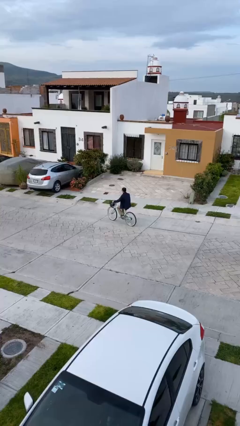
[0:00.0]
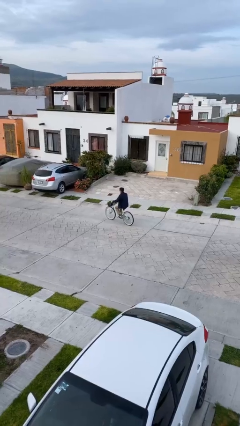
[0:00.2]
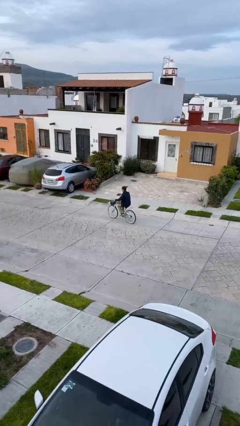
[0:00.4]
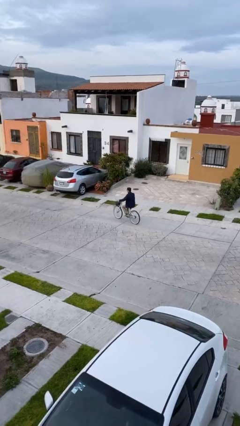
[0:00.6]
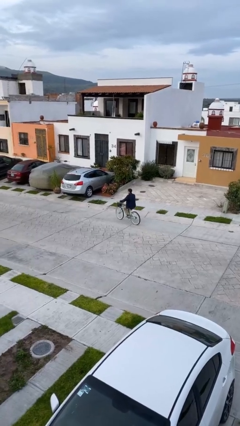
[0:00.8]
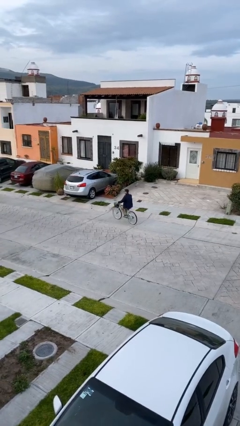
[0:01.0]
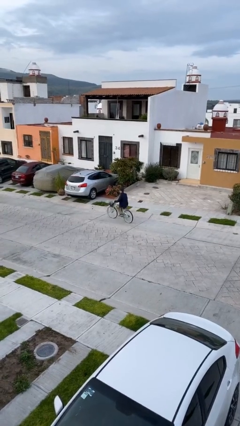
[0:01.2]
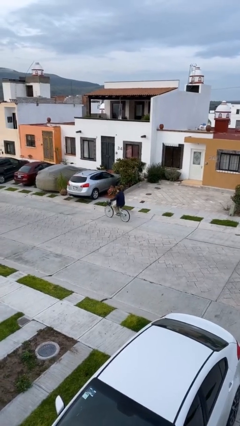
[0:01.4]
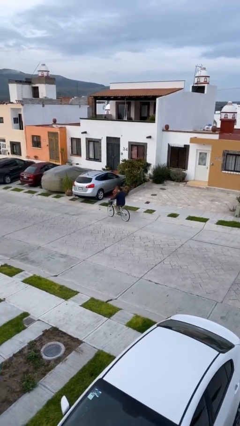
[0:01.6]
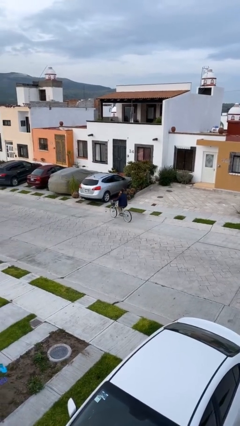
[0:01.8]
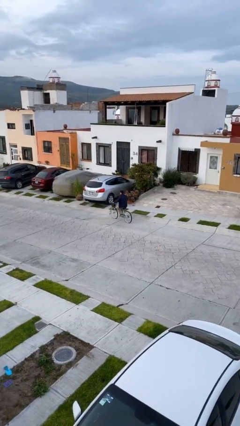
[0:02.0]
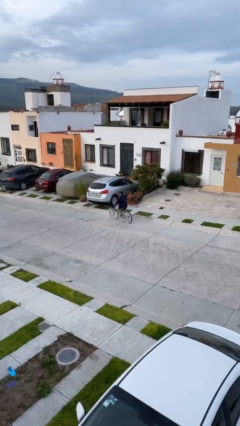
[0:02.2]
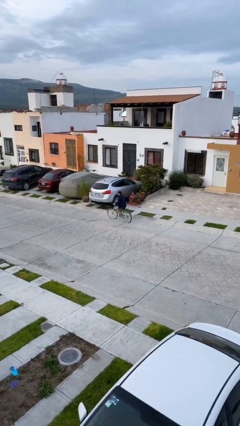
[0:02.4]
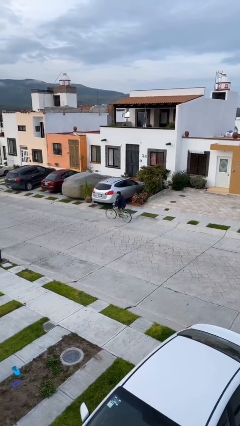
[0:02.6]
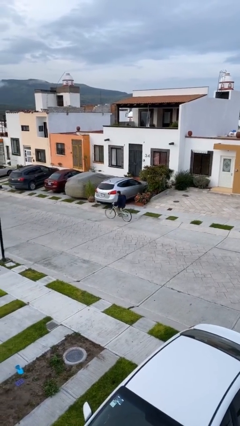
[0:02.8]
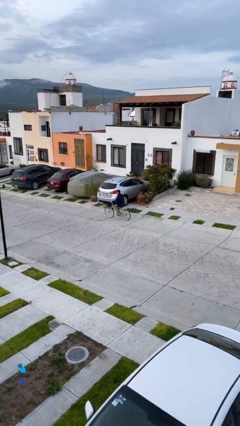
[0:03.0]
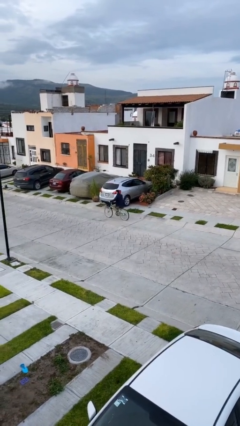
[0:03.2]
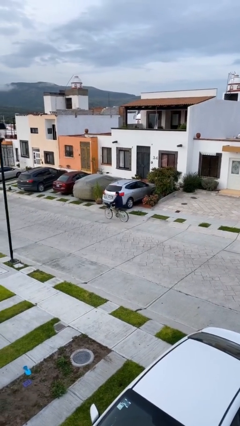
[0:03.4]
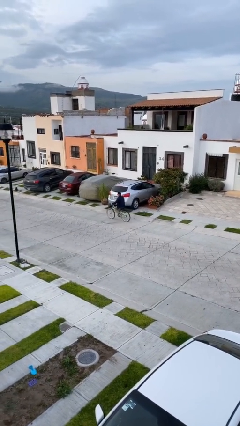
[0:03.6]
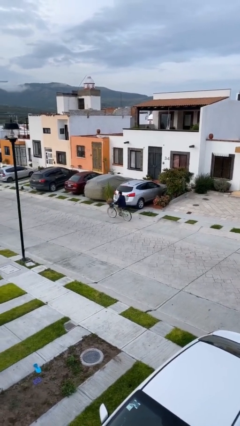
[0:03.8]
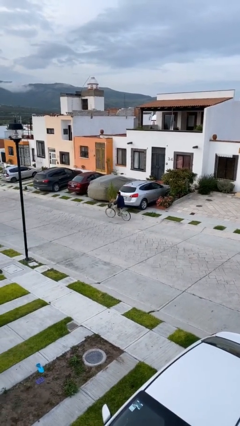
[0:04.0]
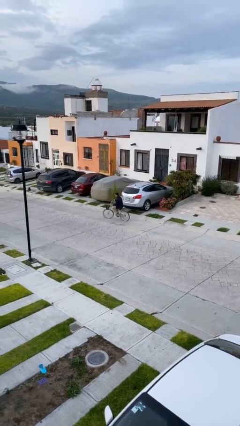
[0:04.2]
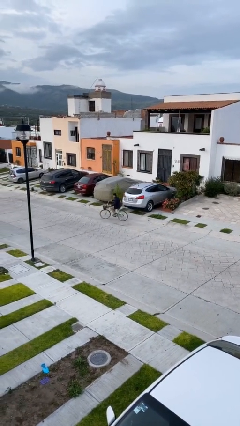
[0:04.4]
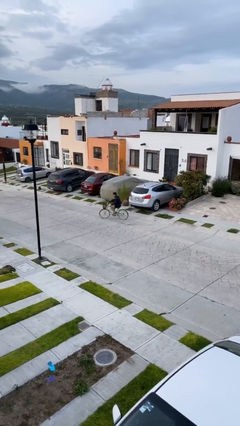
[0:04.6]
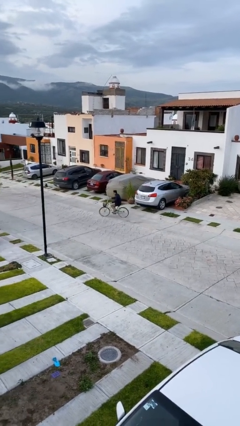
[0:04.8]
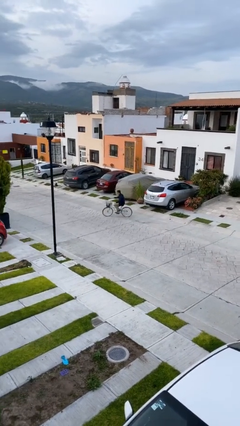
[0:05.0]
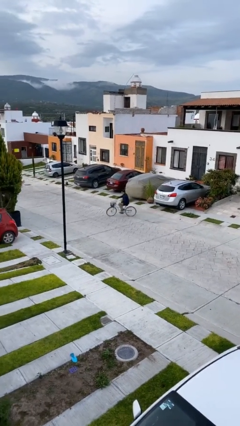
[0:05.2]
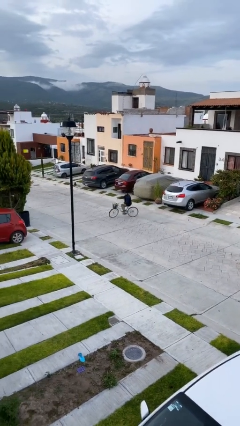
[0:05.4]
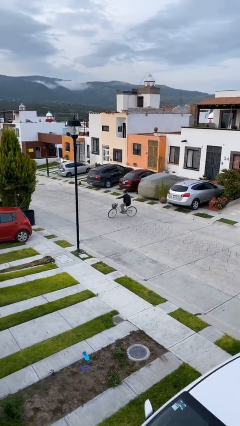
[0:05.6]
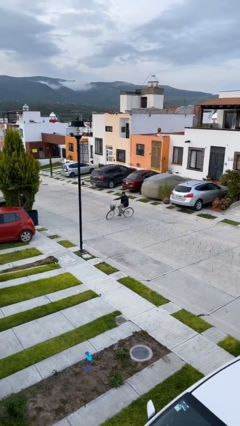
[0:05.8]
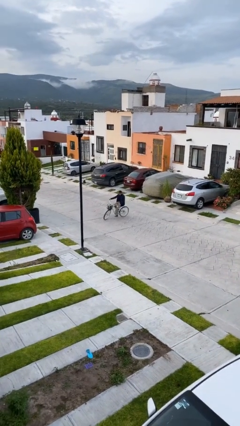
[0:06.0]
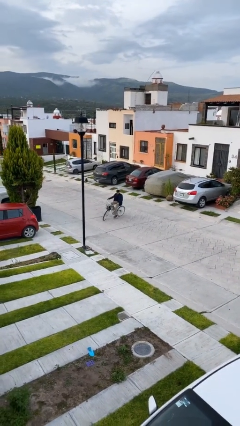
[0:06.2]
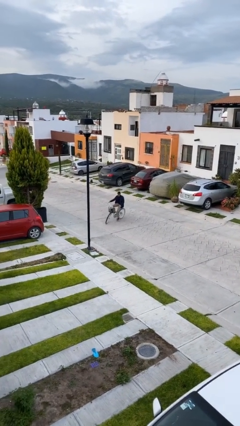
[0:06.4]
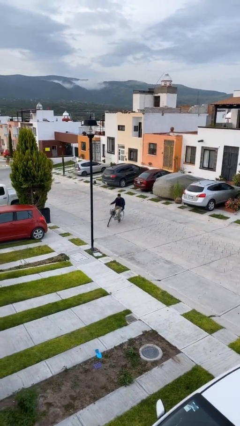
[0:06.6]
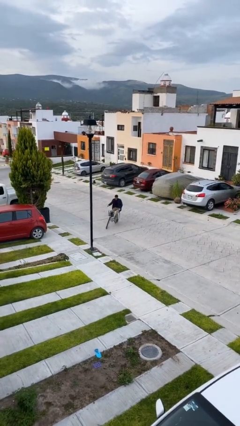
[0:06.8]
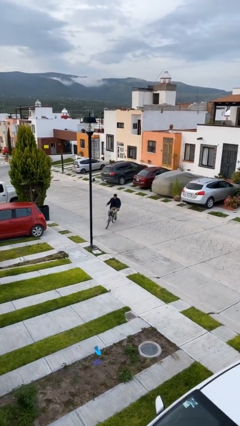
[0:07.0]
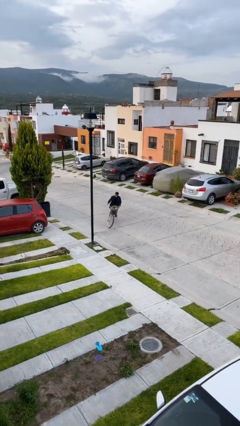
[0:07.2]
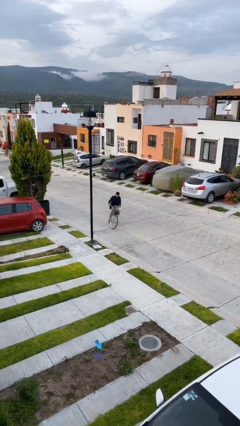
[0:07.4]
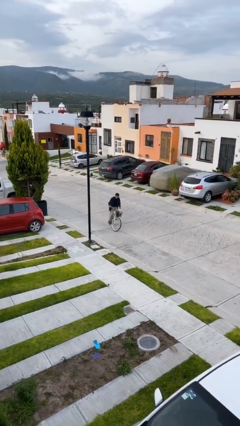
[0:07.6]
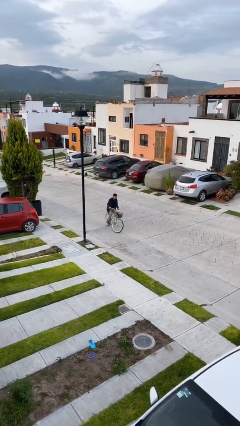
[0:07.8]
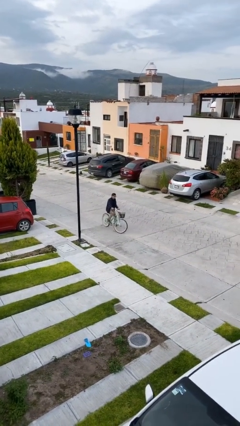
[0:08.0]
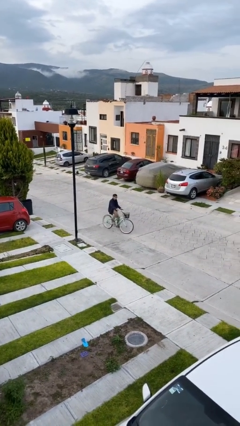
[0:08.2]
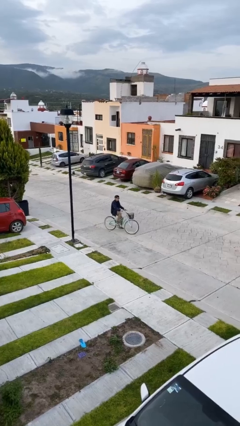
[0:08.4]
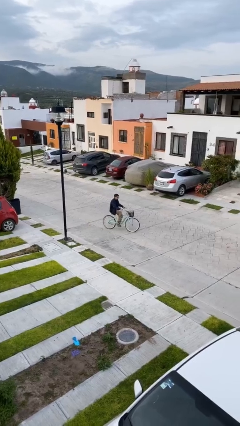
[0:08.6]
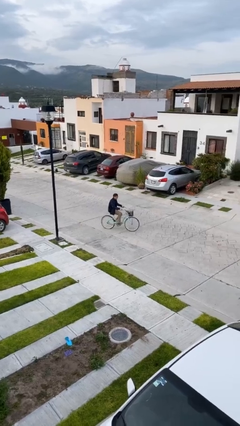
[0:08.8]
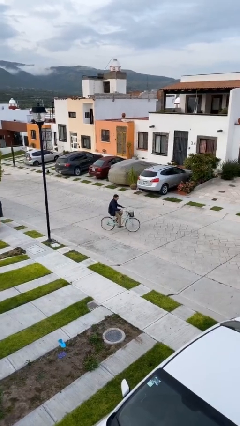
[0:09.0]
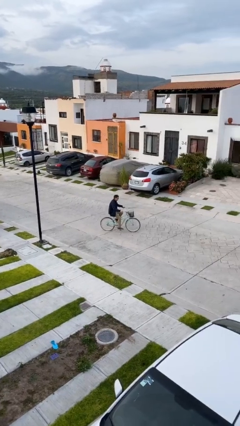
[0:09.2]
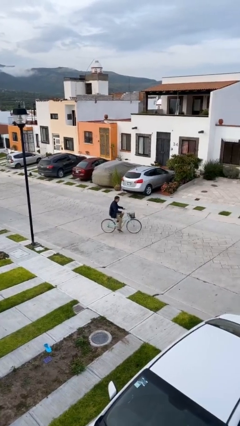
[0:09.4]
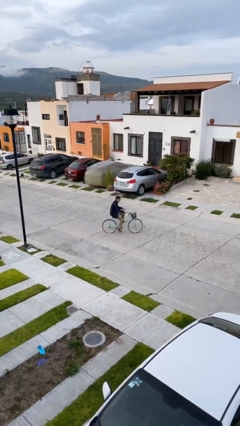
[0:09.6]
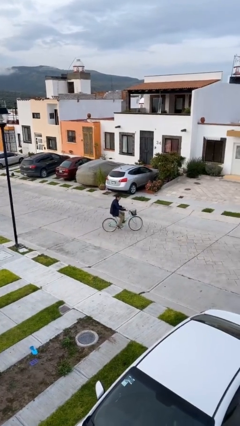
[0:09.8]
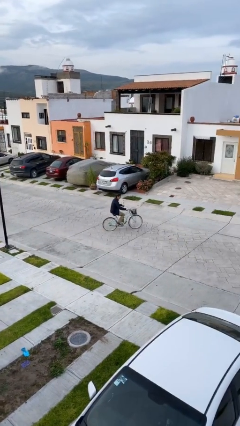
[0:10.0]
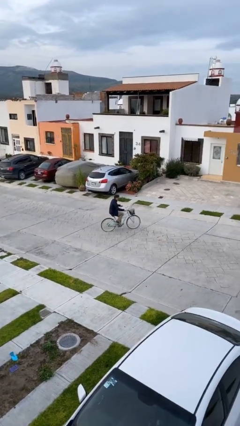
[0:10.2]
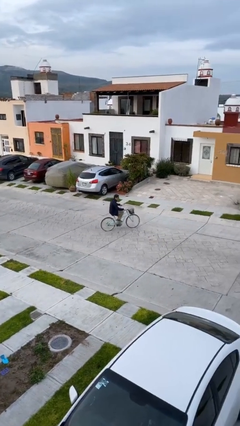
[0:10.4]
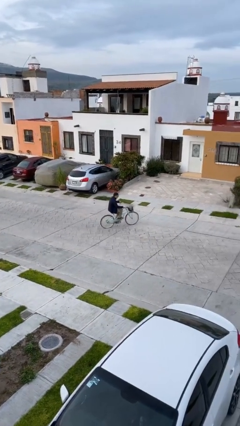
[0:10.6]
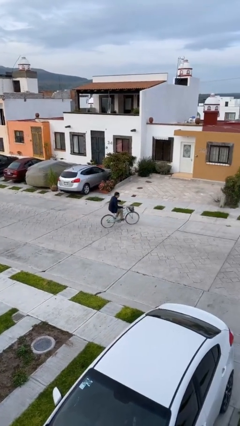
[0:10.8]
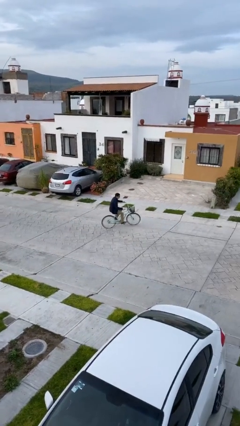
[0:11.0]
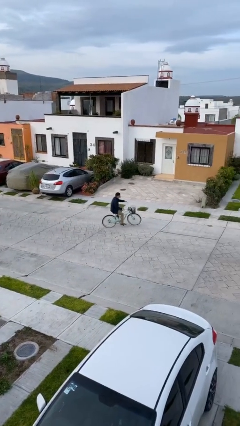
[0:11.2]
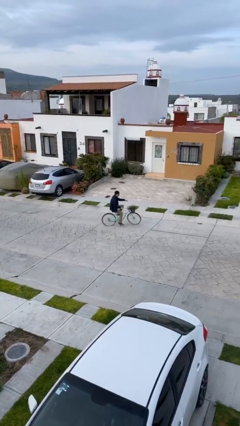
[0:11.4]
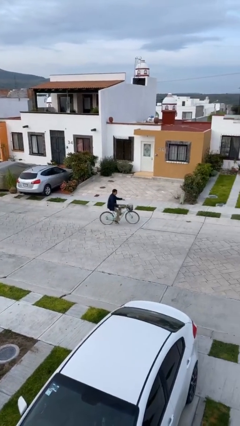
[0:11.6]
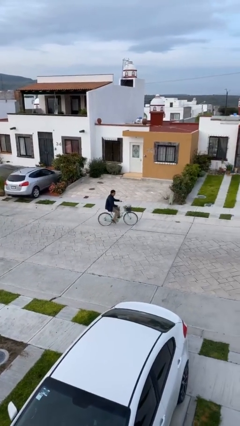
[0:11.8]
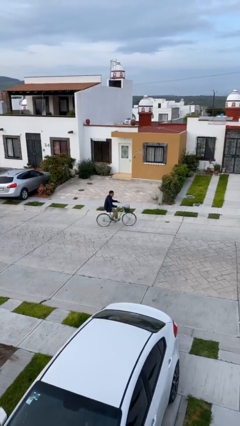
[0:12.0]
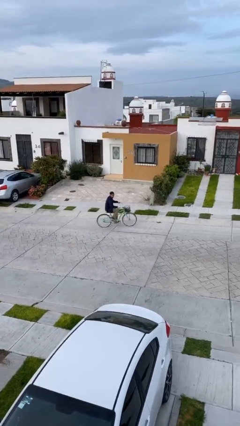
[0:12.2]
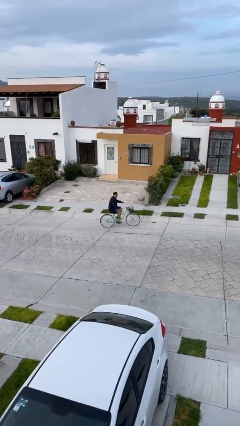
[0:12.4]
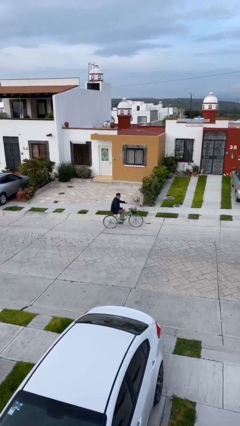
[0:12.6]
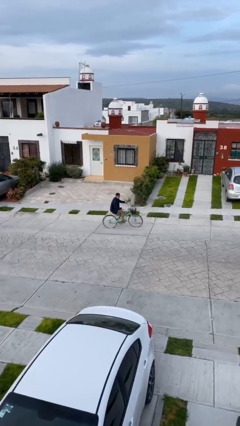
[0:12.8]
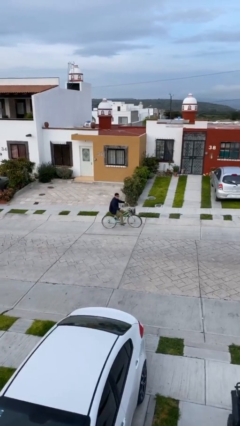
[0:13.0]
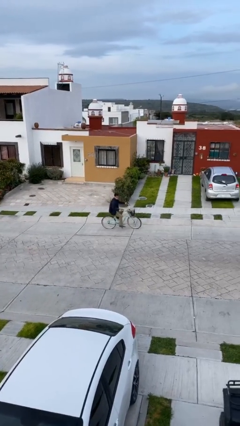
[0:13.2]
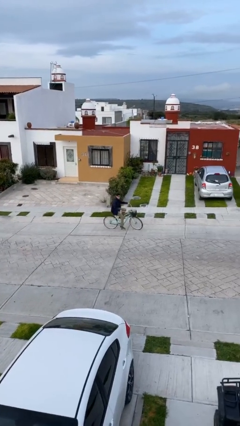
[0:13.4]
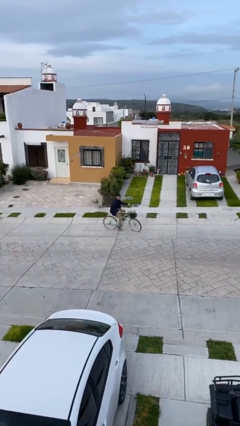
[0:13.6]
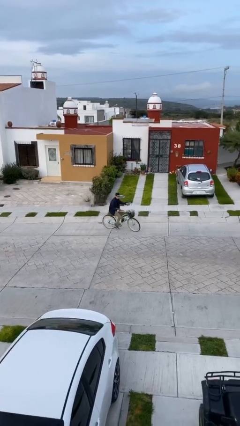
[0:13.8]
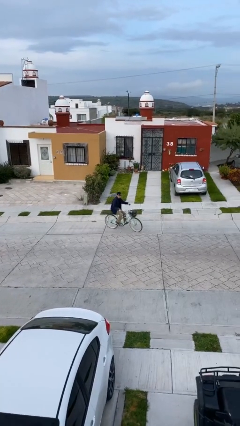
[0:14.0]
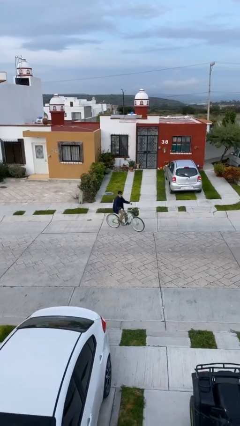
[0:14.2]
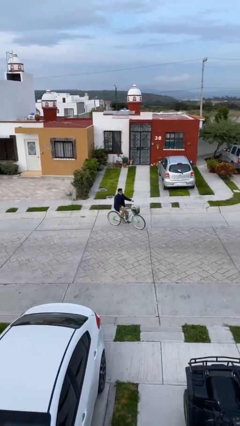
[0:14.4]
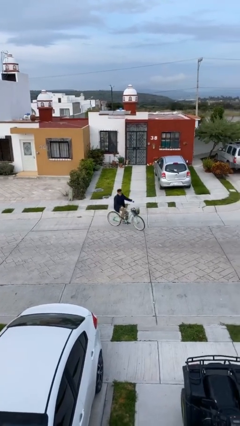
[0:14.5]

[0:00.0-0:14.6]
person rides bicycle

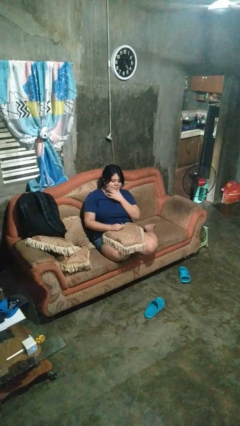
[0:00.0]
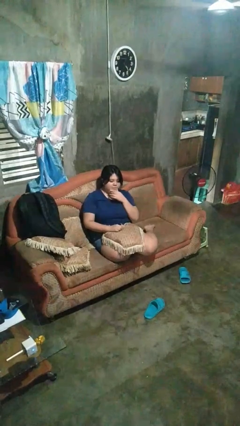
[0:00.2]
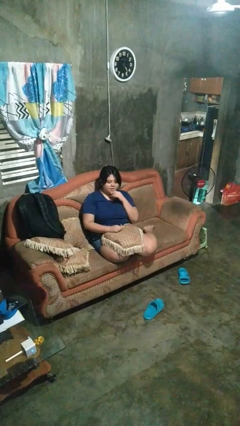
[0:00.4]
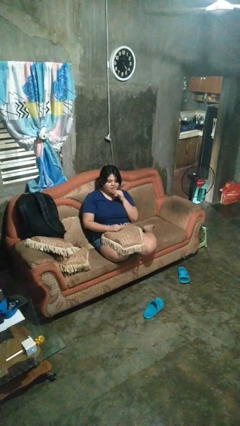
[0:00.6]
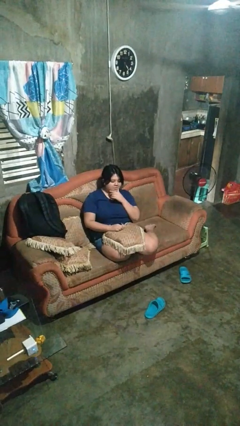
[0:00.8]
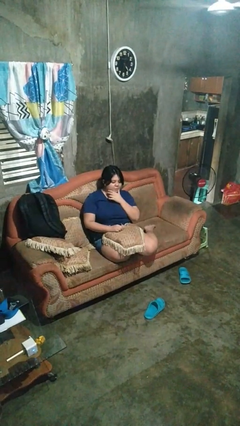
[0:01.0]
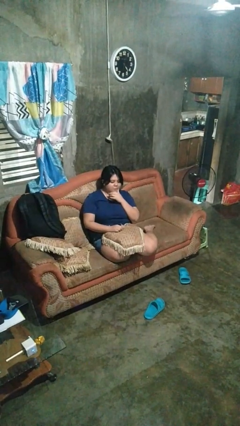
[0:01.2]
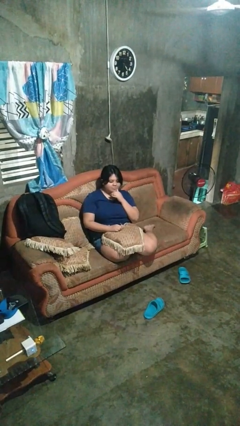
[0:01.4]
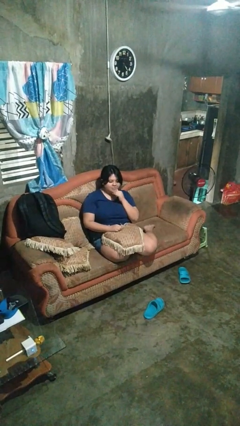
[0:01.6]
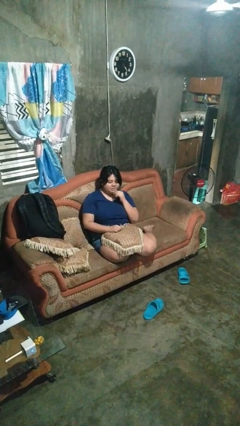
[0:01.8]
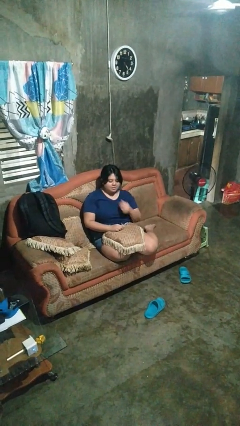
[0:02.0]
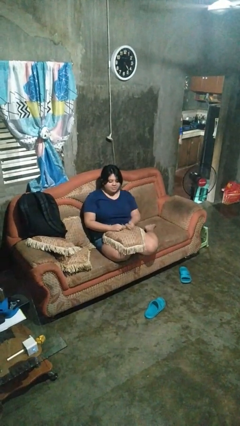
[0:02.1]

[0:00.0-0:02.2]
person strokes chin

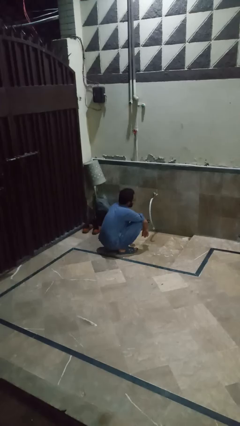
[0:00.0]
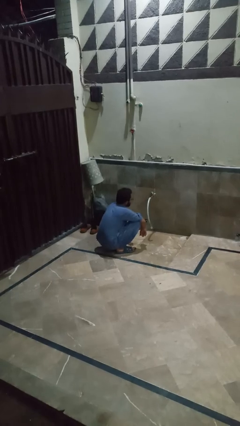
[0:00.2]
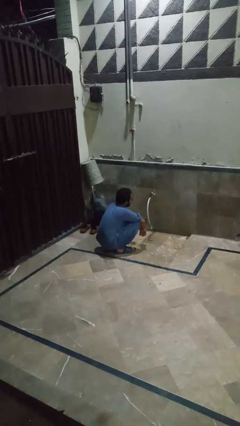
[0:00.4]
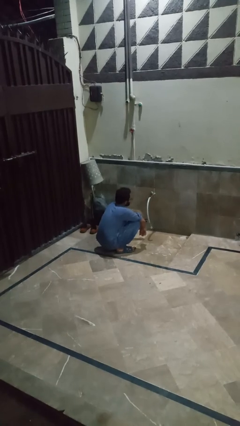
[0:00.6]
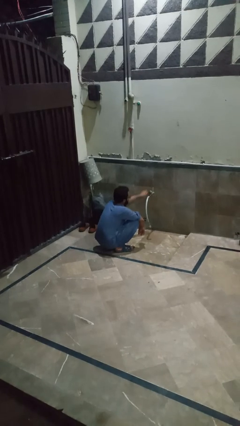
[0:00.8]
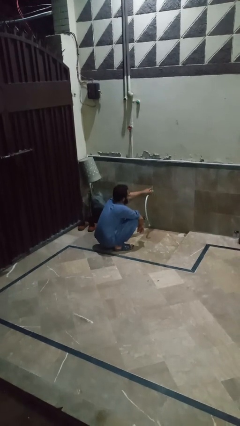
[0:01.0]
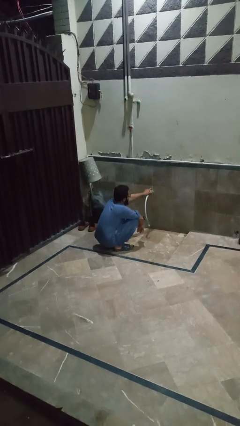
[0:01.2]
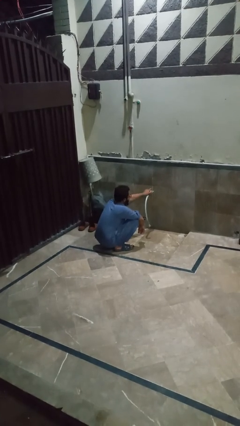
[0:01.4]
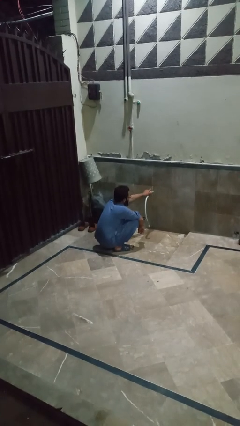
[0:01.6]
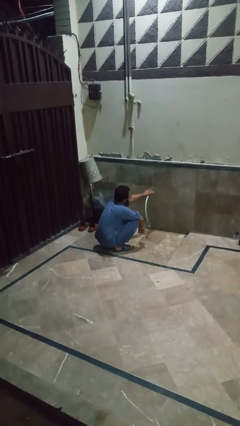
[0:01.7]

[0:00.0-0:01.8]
person turns on faucet
